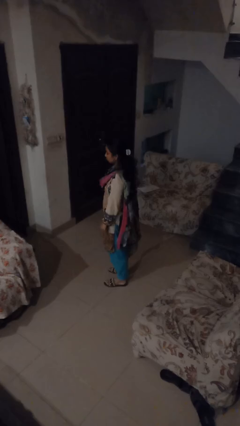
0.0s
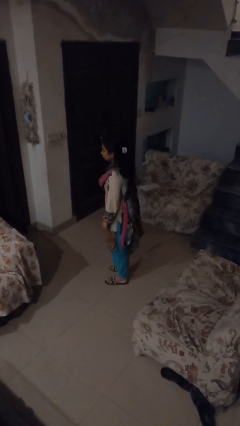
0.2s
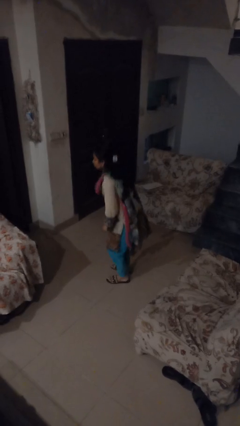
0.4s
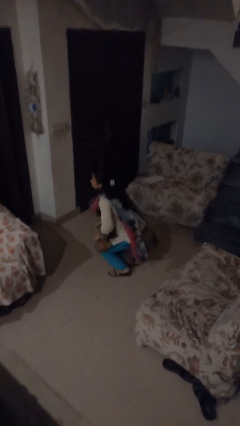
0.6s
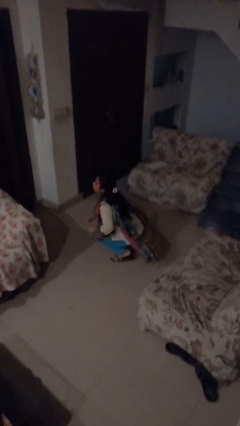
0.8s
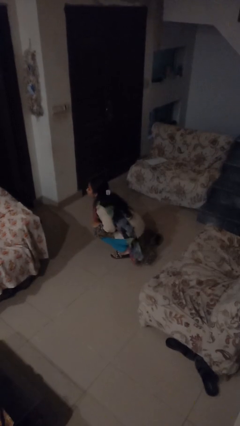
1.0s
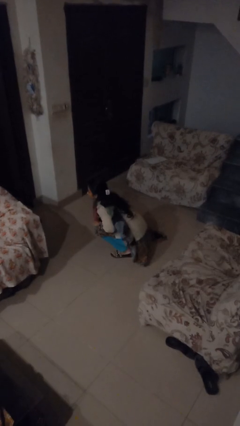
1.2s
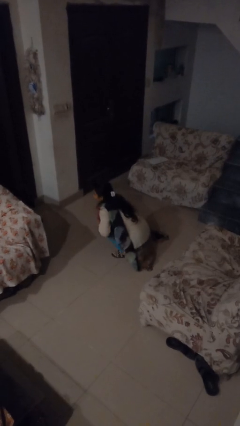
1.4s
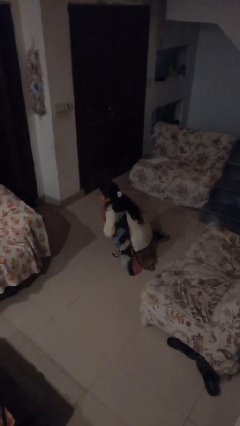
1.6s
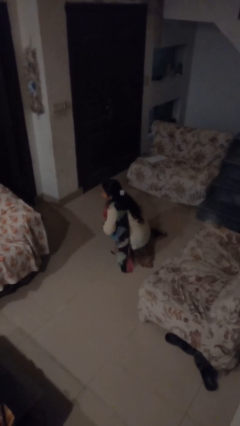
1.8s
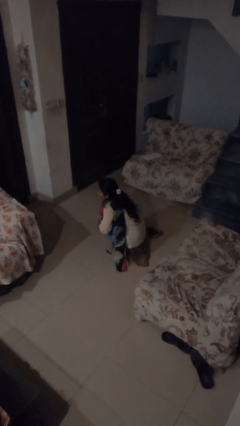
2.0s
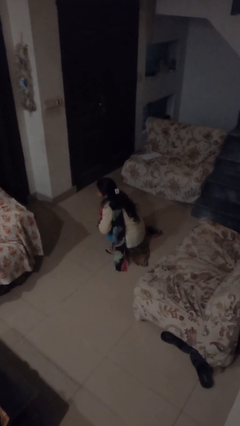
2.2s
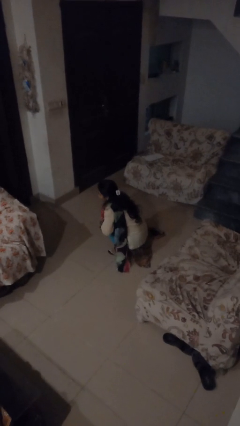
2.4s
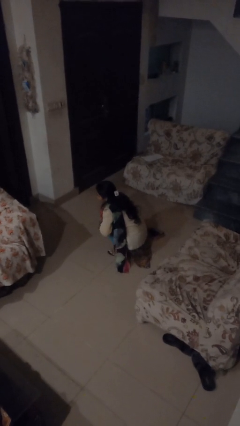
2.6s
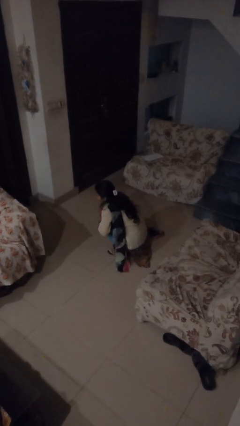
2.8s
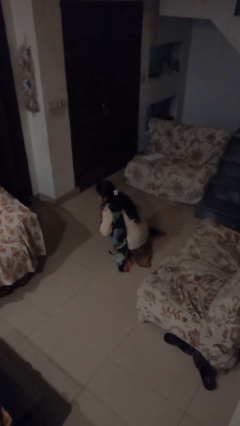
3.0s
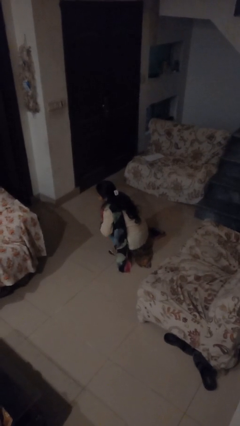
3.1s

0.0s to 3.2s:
person squats

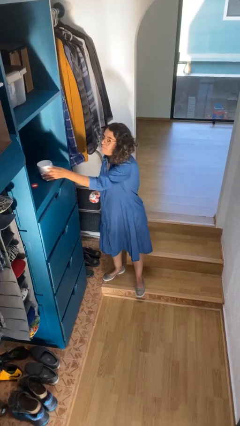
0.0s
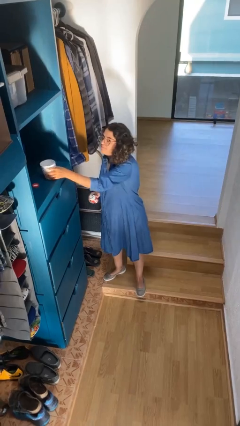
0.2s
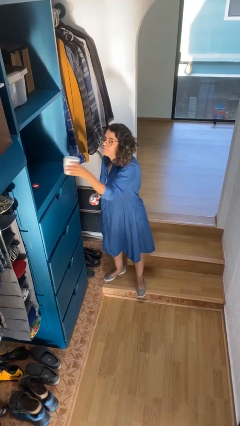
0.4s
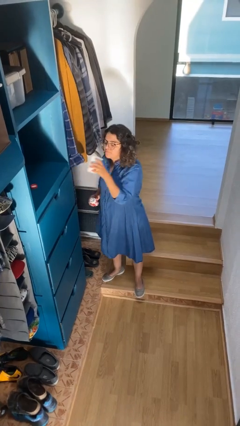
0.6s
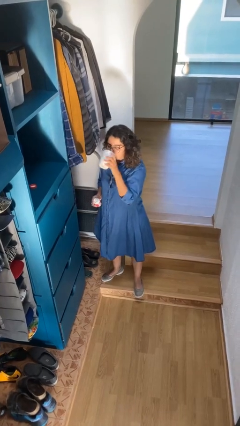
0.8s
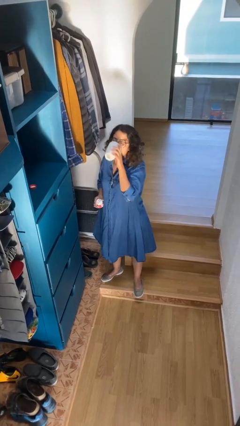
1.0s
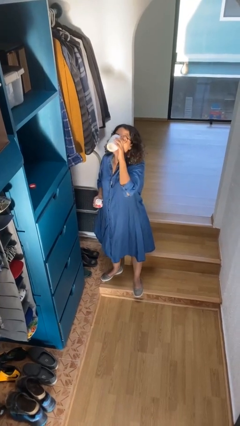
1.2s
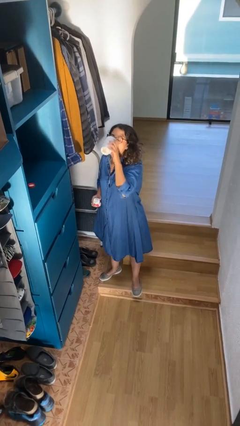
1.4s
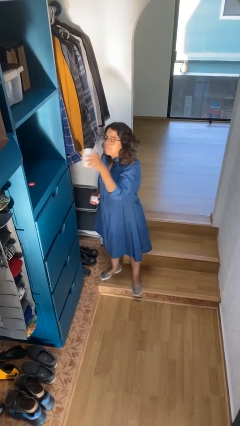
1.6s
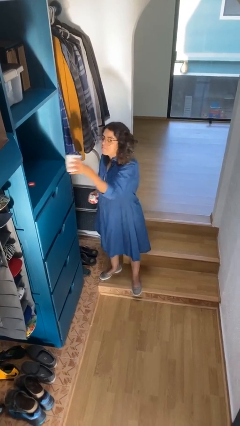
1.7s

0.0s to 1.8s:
person drinks from cup

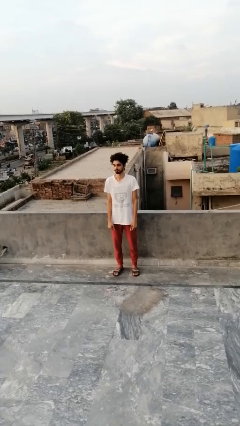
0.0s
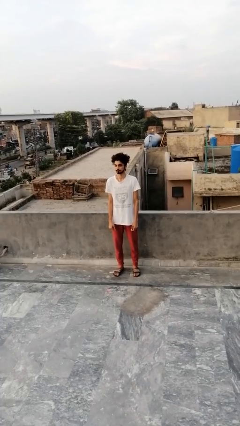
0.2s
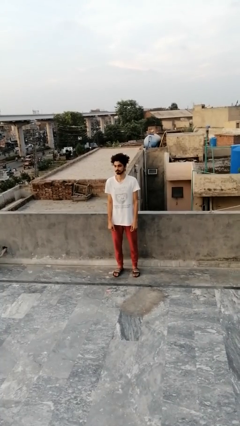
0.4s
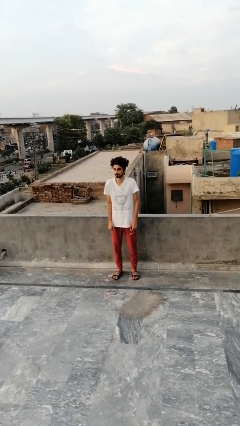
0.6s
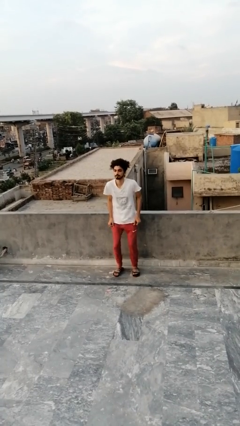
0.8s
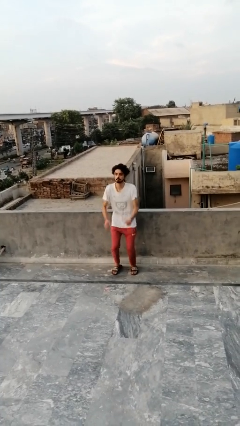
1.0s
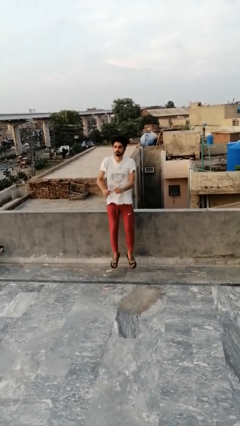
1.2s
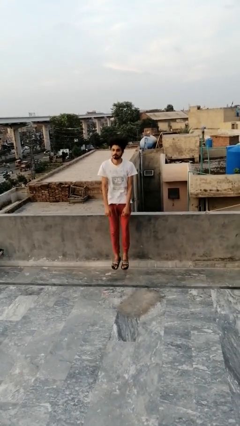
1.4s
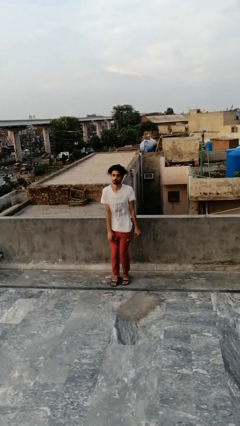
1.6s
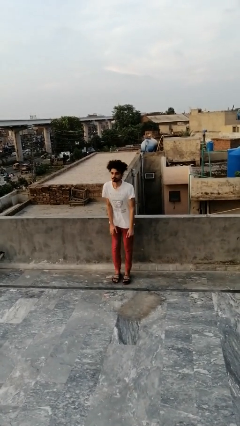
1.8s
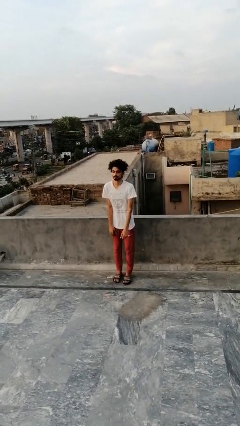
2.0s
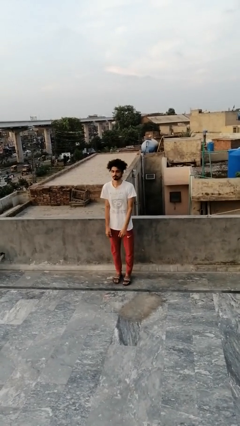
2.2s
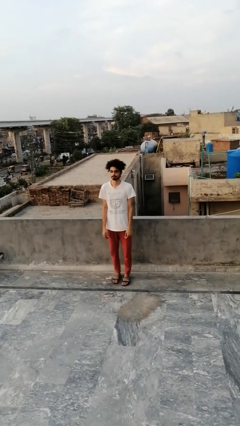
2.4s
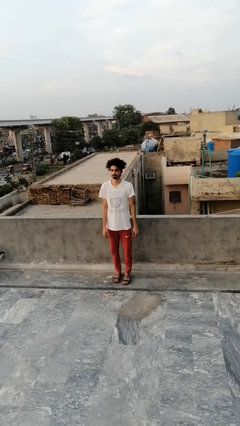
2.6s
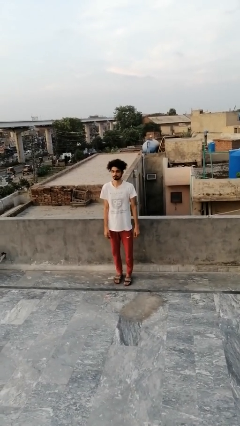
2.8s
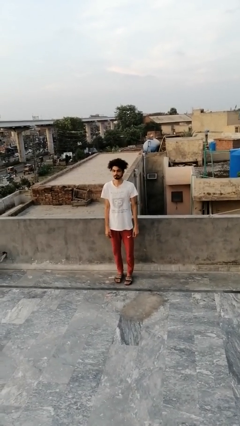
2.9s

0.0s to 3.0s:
person jumps

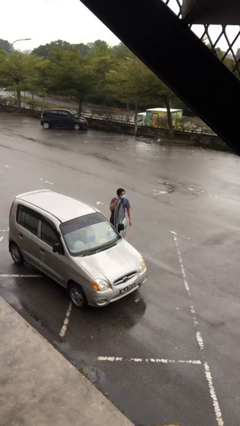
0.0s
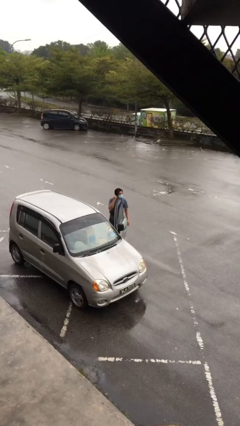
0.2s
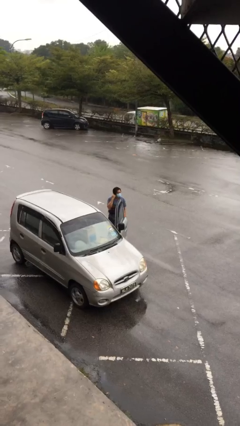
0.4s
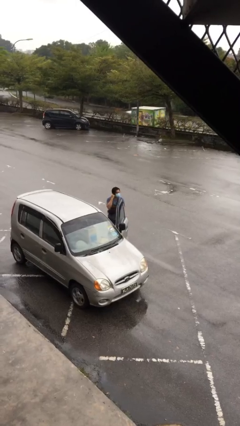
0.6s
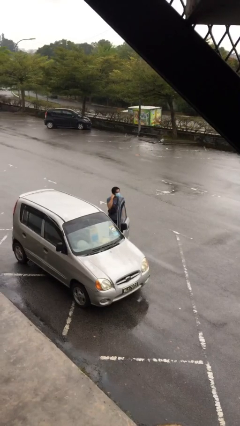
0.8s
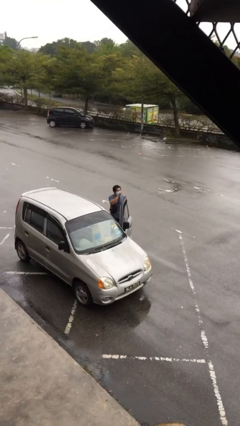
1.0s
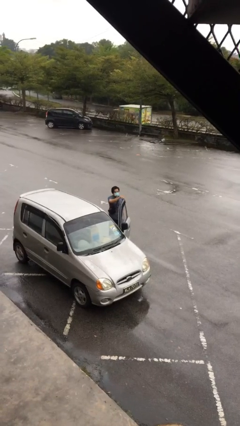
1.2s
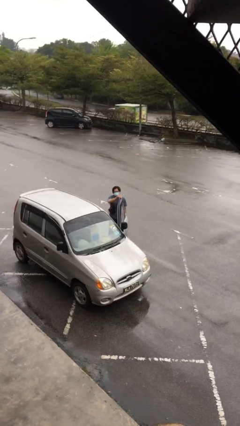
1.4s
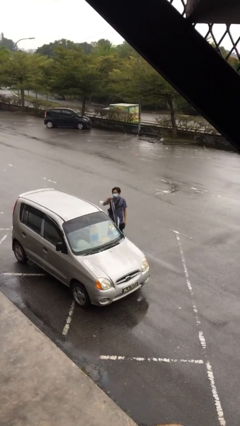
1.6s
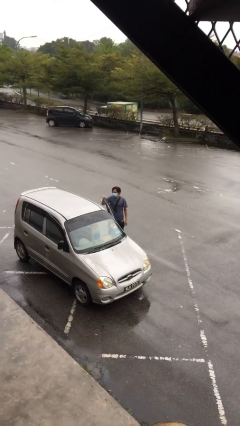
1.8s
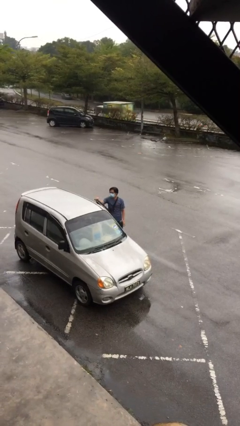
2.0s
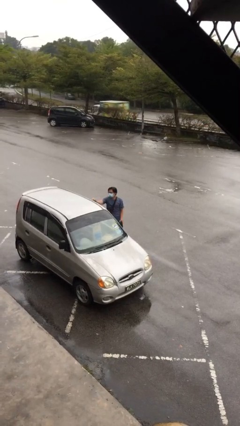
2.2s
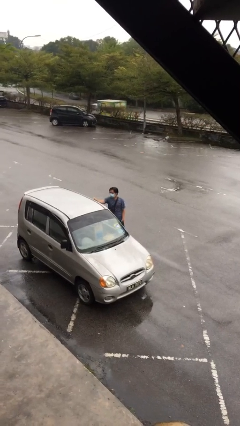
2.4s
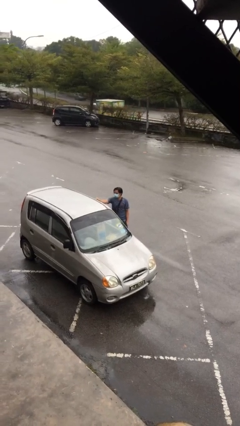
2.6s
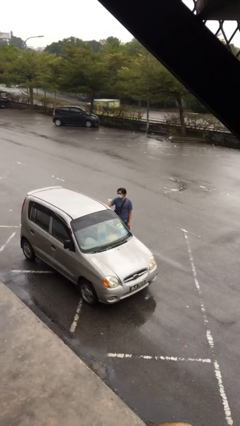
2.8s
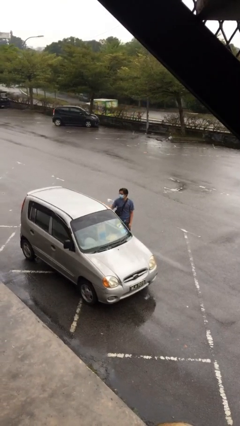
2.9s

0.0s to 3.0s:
person closes car door

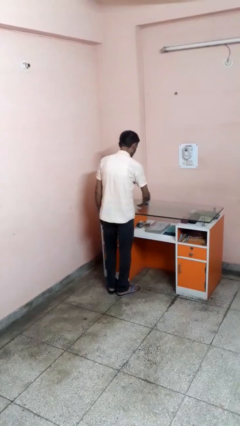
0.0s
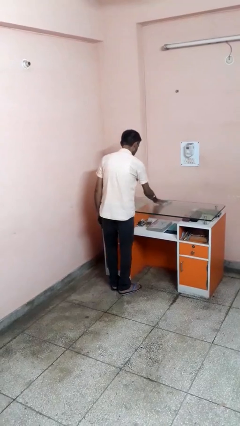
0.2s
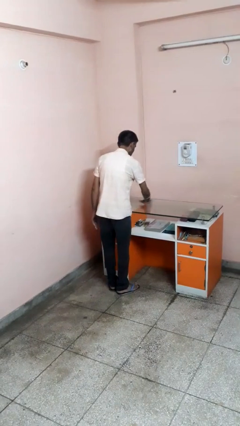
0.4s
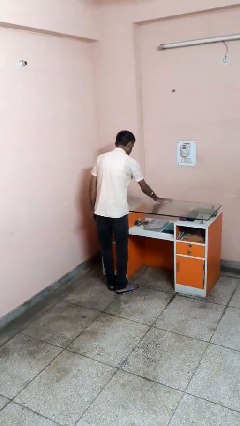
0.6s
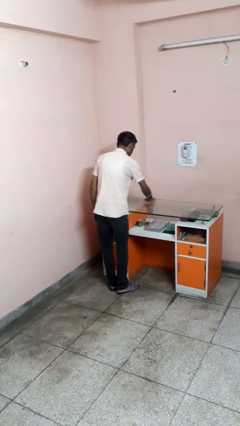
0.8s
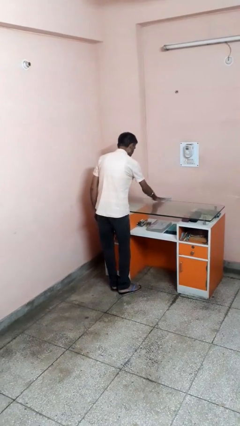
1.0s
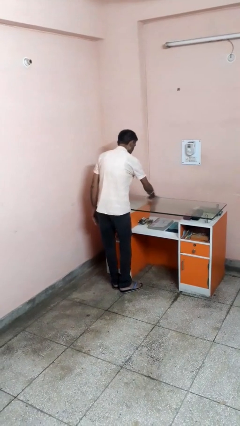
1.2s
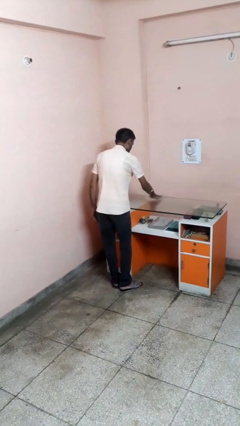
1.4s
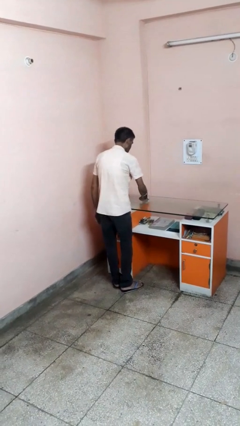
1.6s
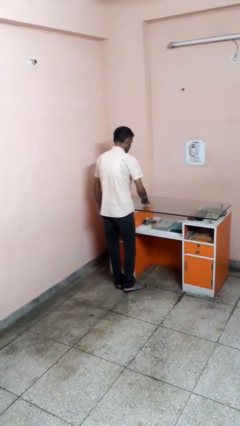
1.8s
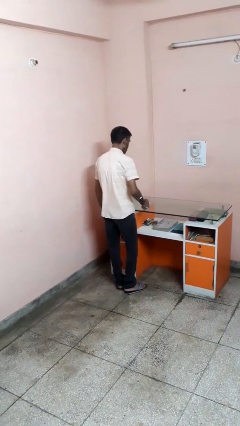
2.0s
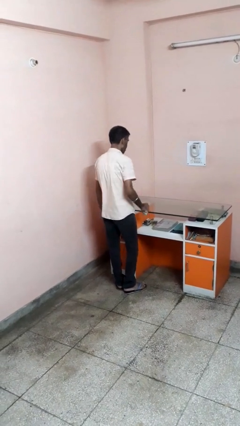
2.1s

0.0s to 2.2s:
person cleans table with rag

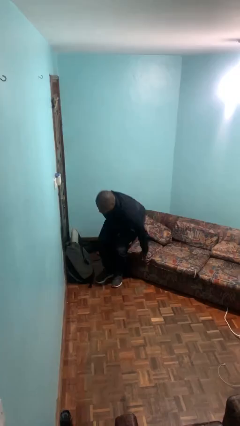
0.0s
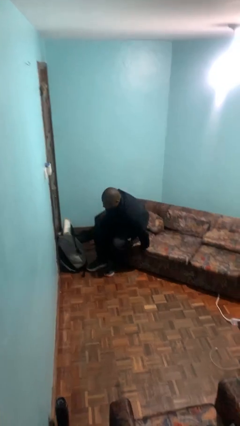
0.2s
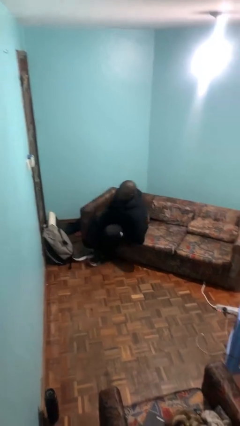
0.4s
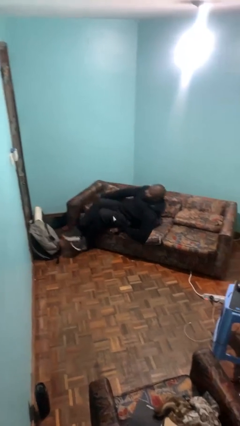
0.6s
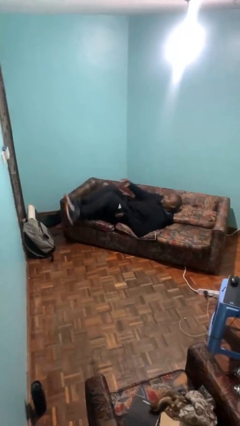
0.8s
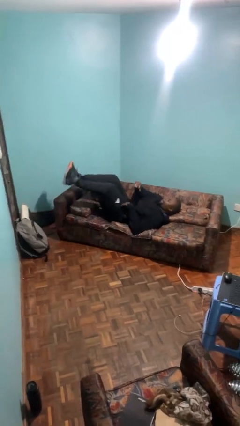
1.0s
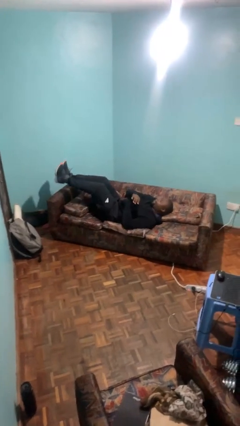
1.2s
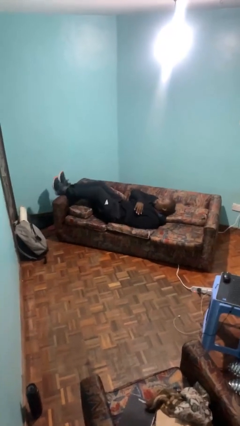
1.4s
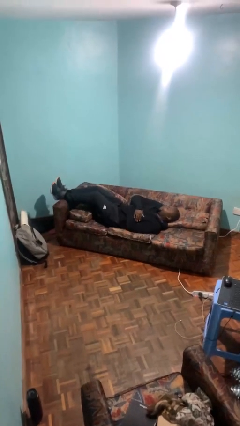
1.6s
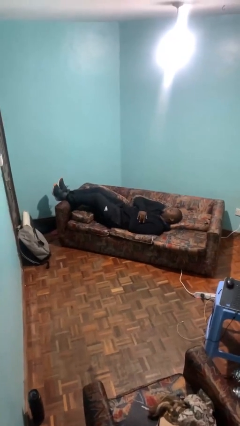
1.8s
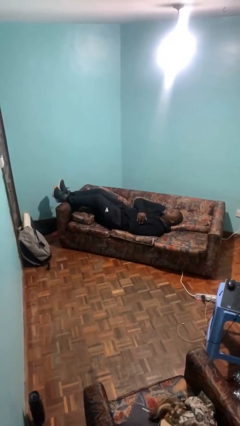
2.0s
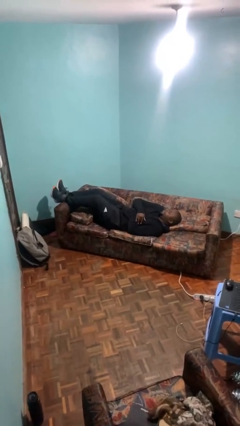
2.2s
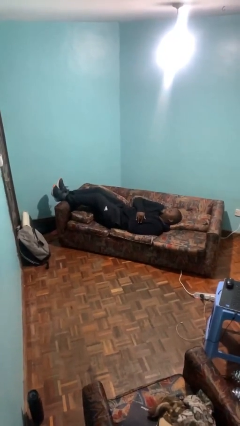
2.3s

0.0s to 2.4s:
person lies down on bed

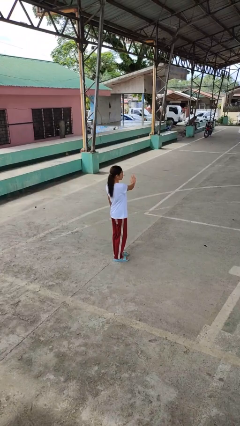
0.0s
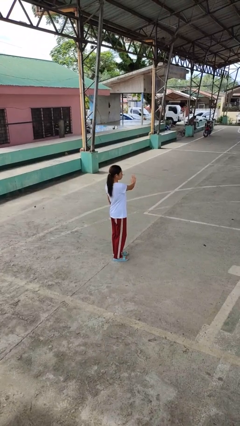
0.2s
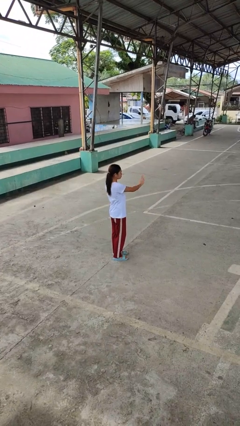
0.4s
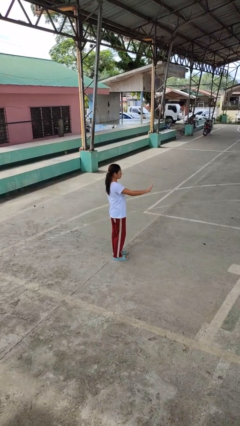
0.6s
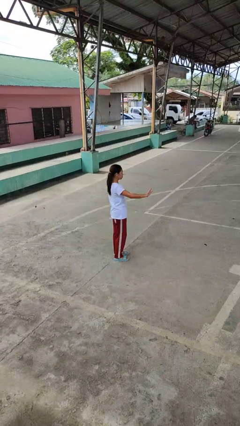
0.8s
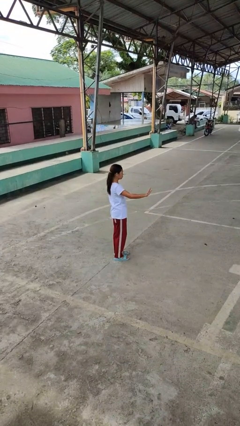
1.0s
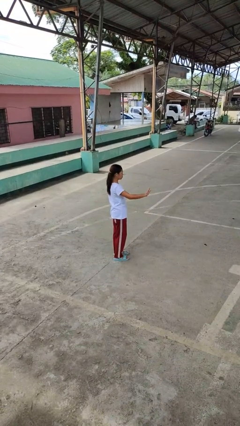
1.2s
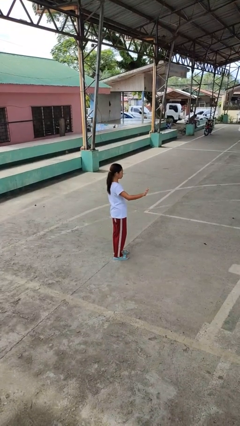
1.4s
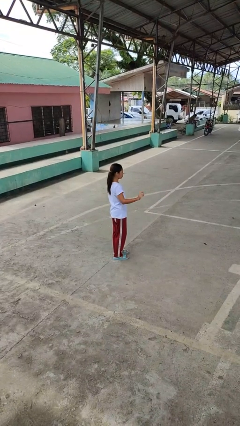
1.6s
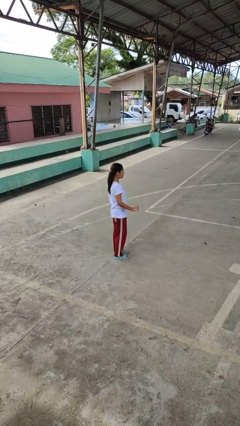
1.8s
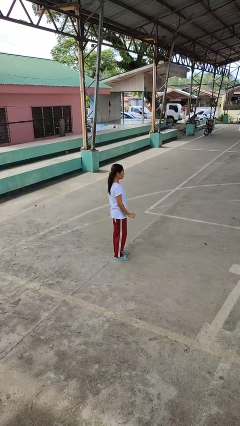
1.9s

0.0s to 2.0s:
person gestures swipe right
